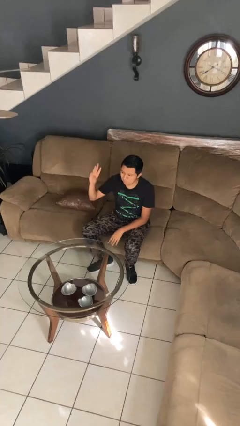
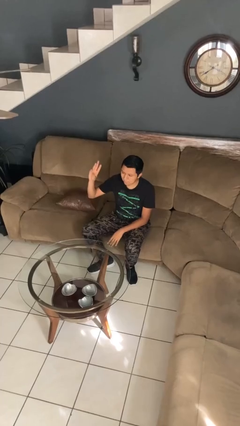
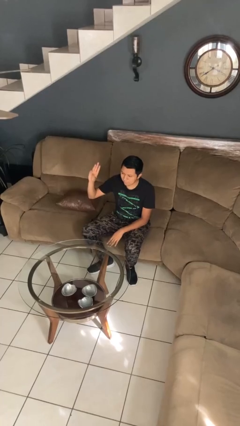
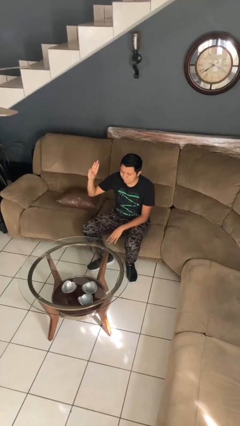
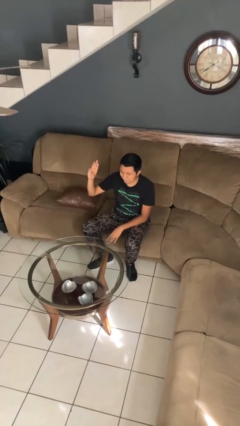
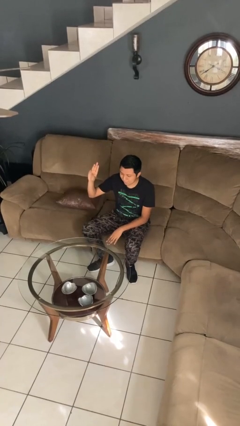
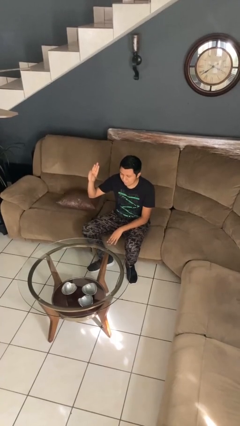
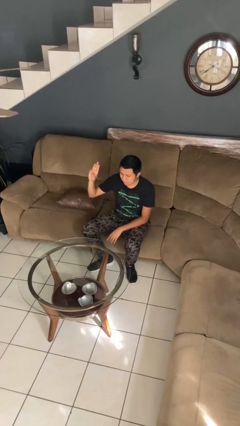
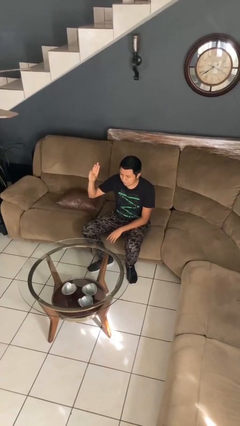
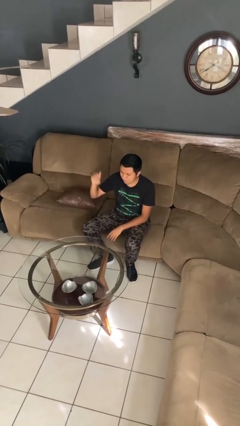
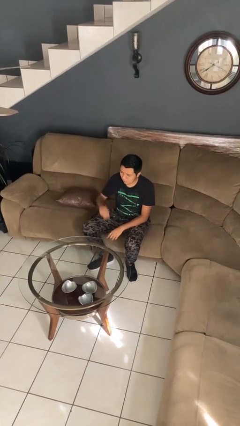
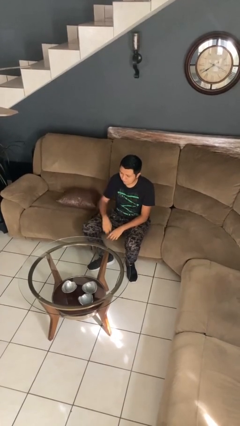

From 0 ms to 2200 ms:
person gestures number three

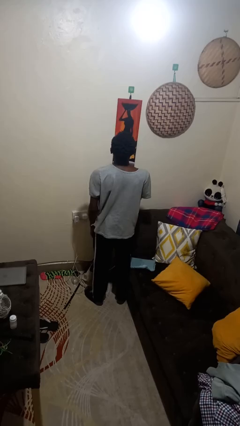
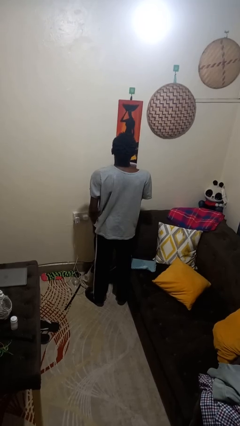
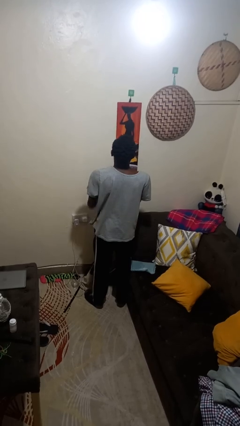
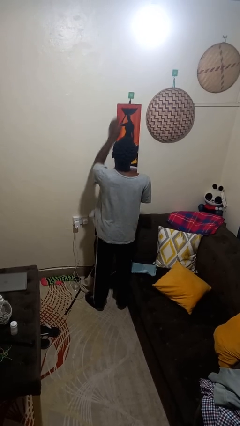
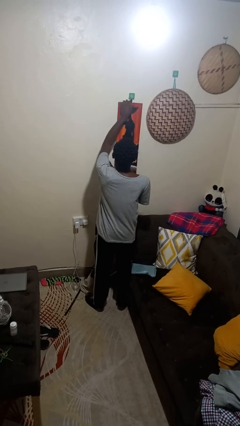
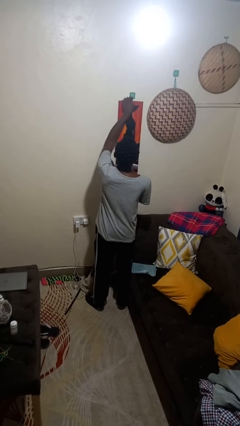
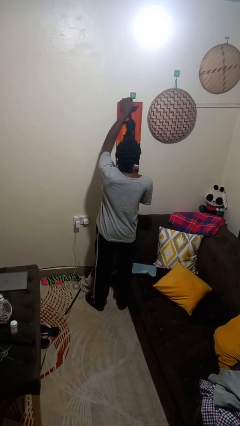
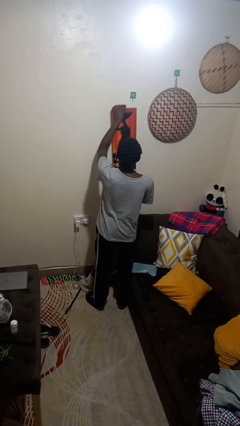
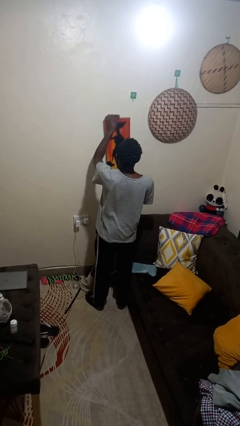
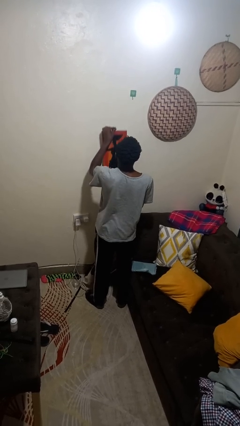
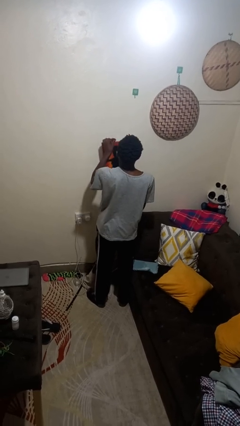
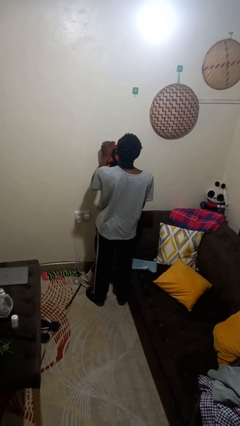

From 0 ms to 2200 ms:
person takes down picture frame

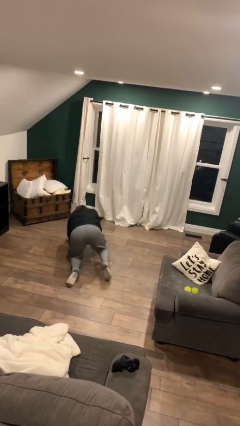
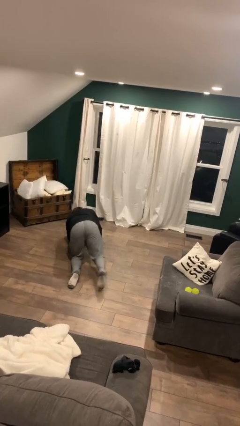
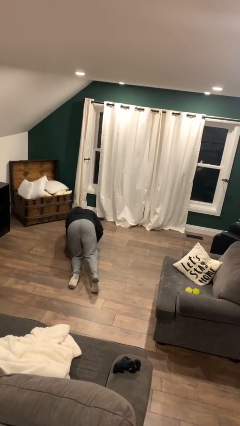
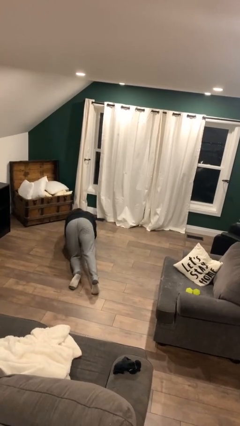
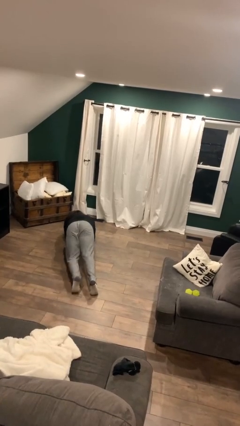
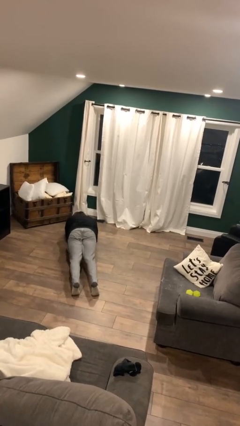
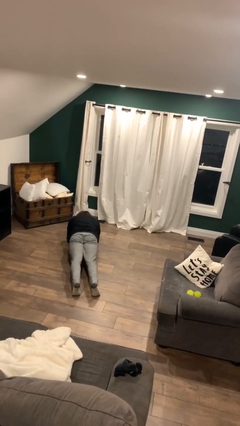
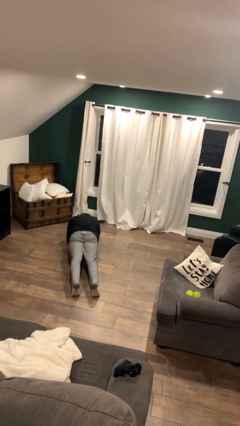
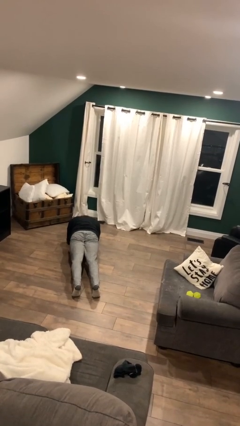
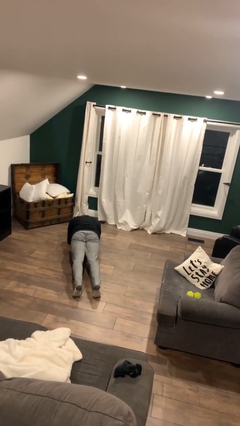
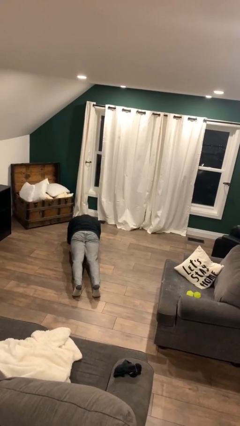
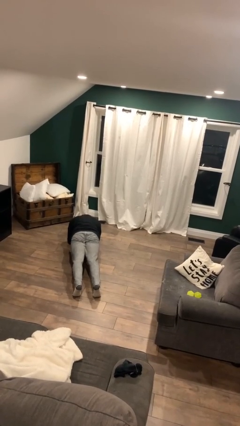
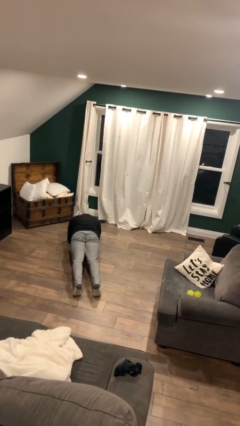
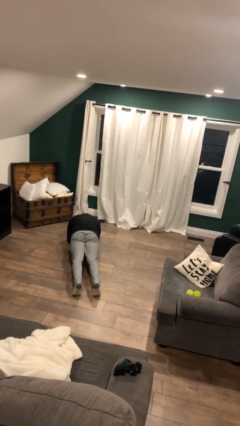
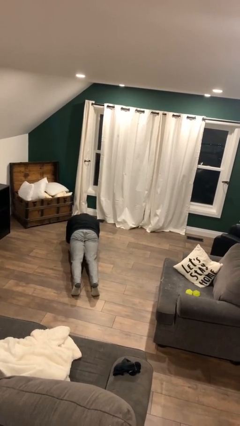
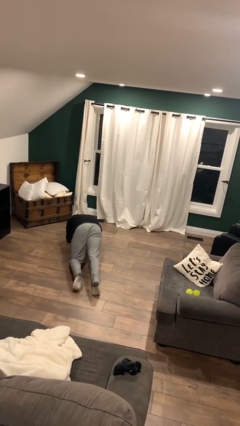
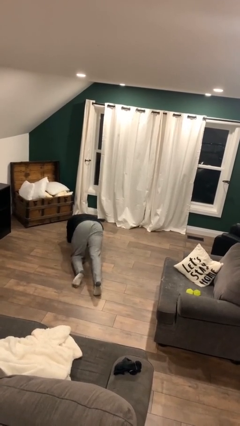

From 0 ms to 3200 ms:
person exercises with plank

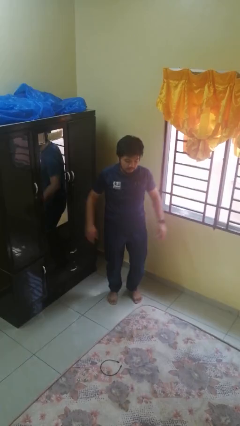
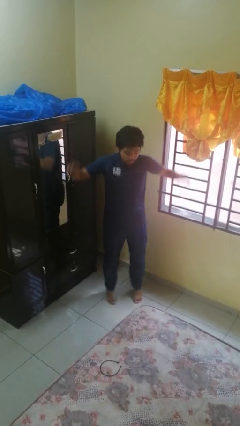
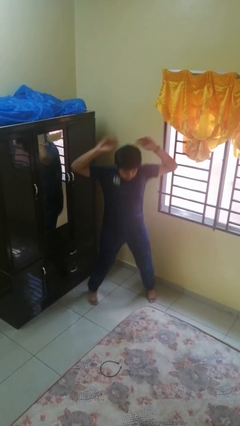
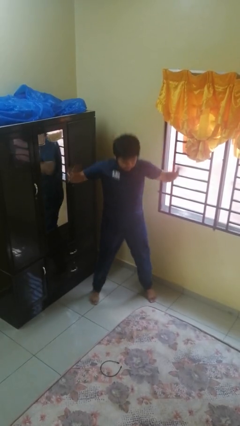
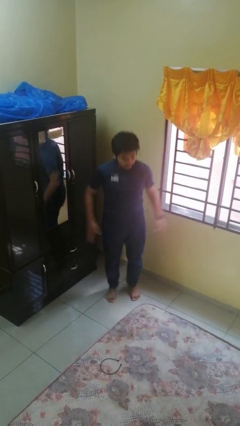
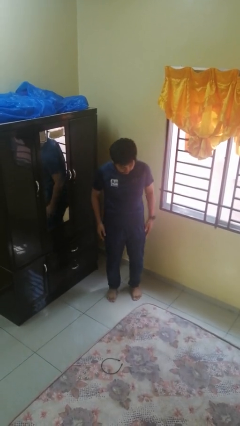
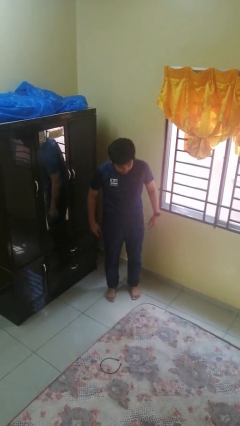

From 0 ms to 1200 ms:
person exercises with jumping jacks

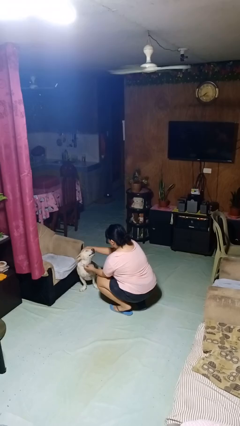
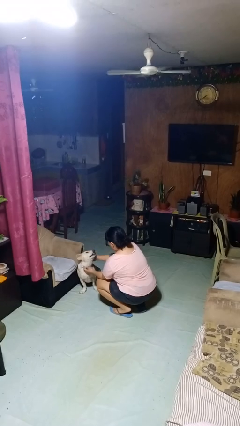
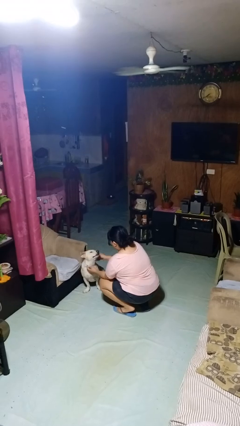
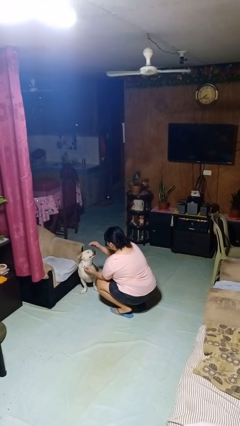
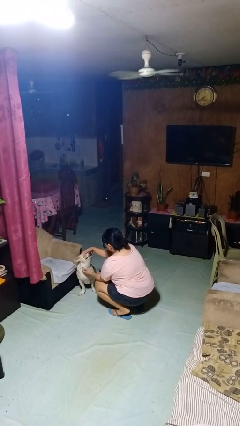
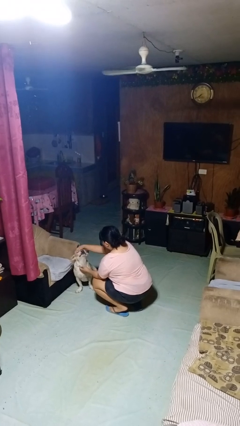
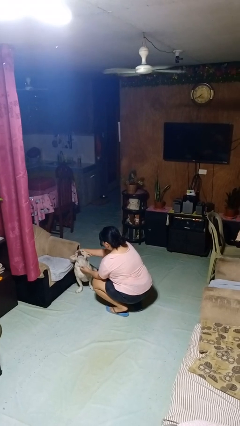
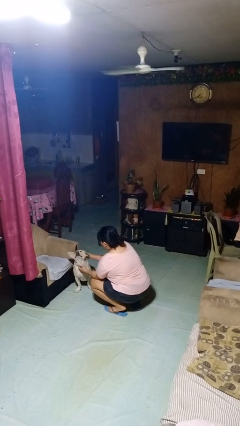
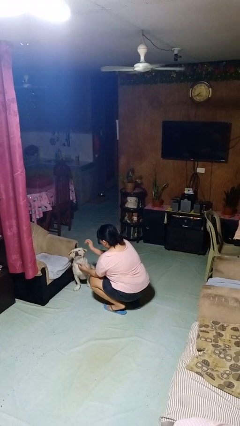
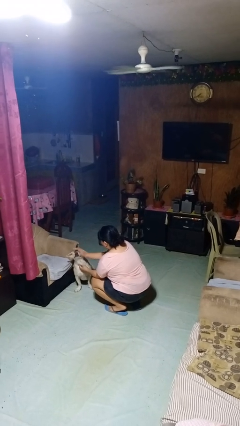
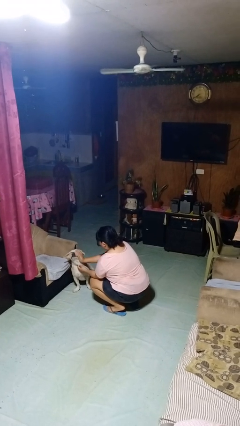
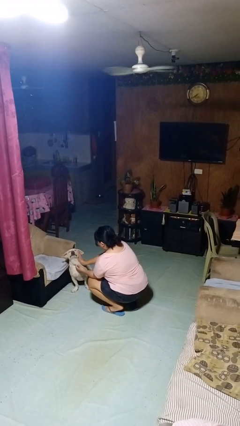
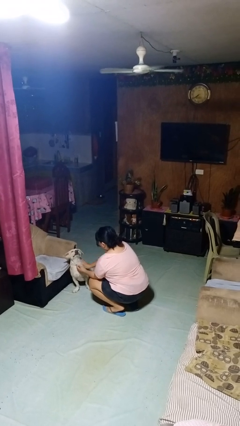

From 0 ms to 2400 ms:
person pets dog

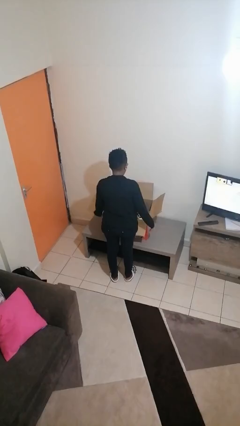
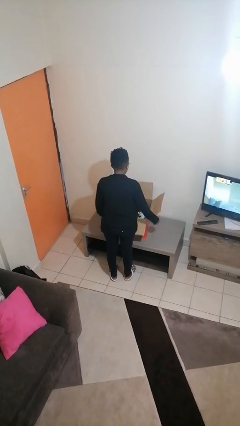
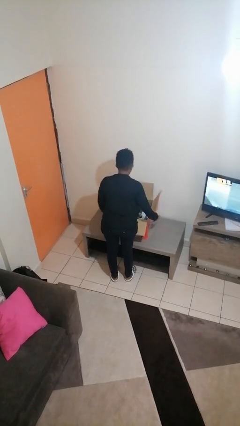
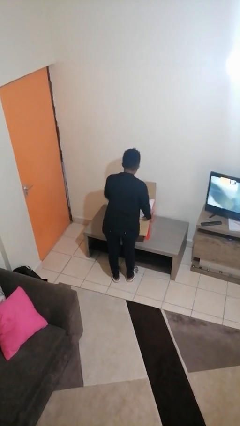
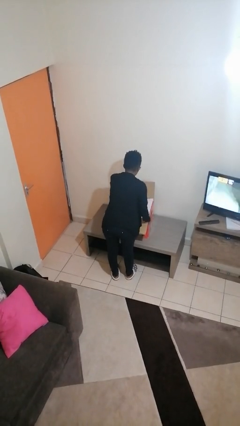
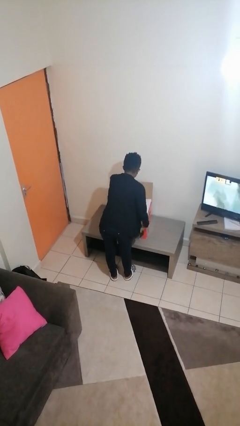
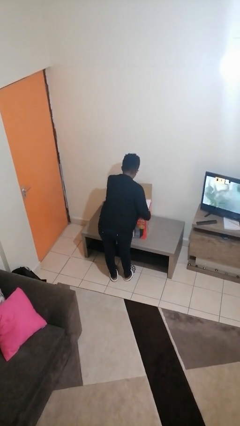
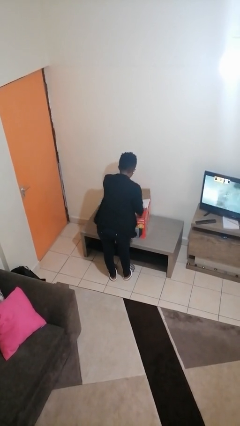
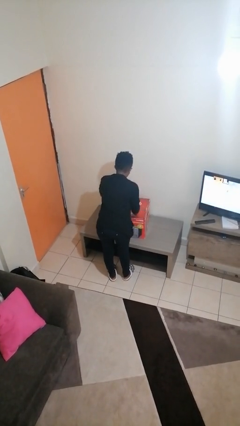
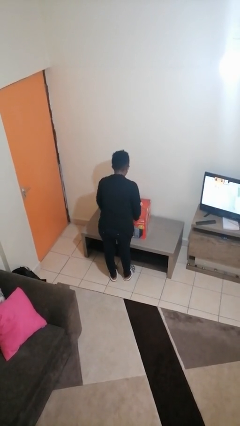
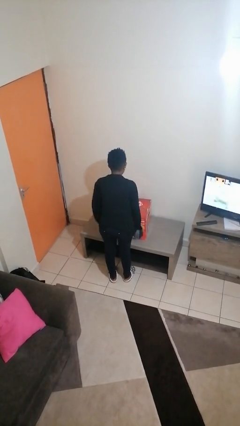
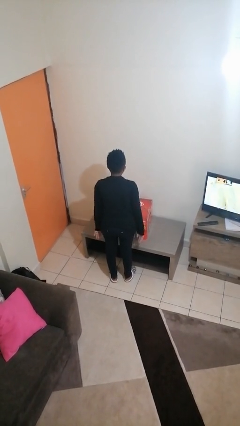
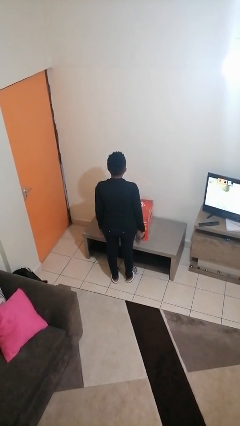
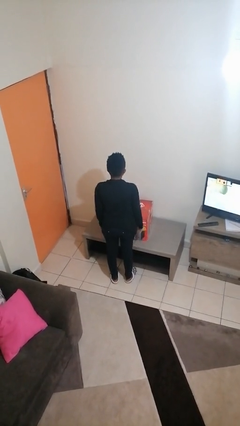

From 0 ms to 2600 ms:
person closes box

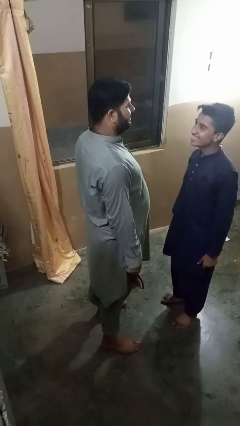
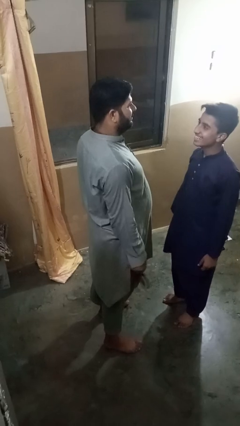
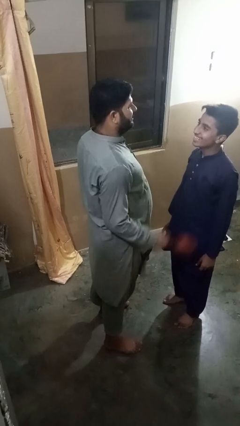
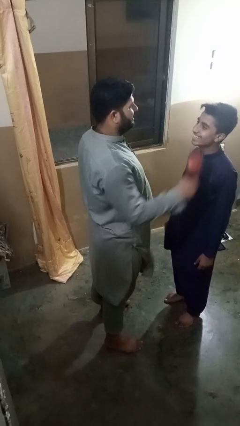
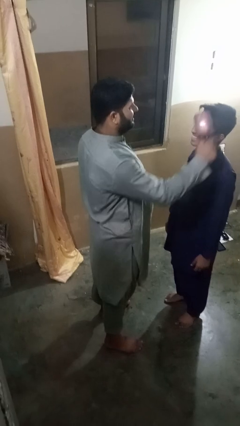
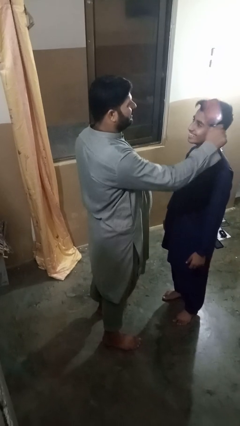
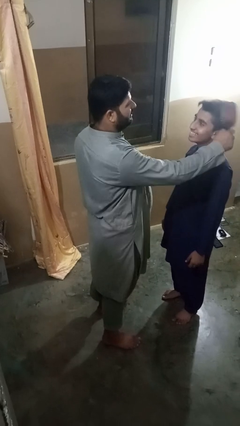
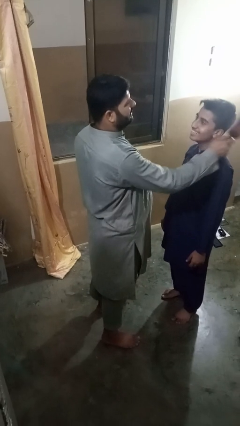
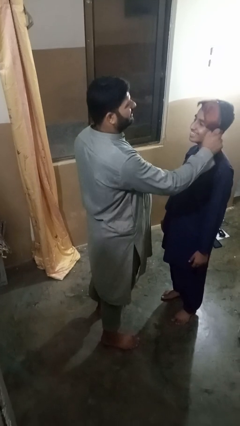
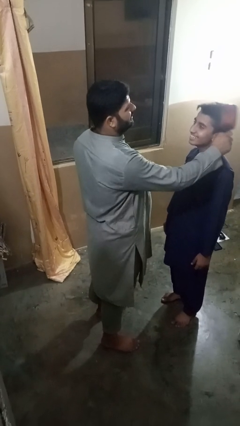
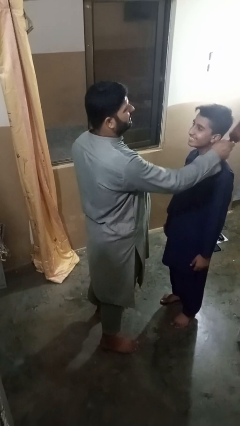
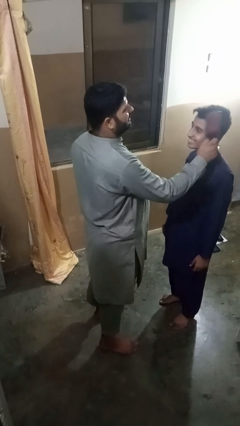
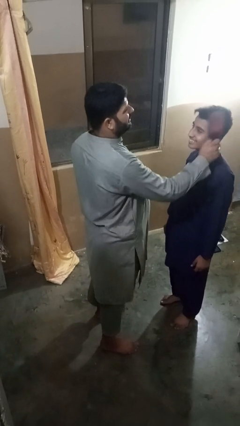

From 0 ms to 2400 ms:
person brushes hair of person

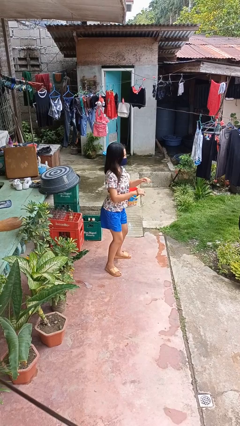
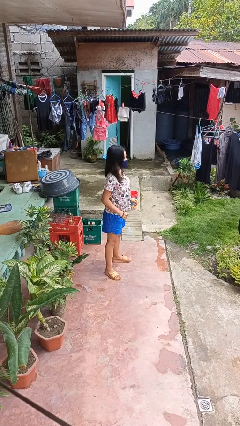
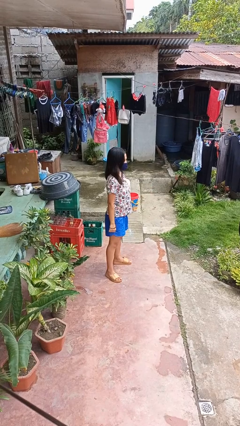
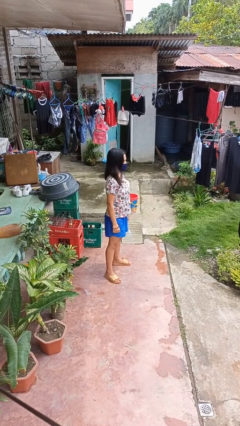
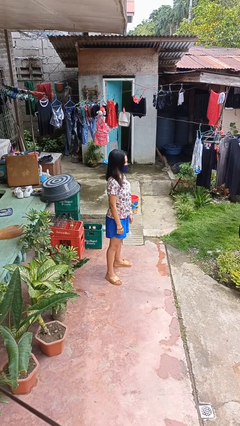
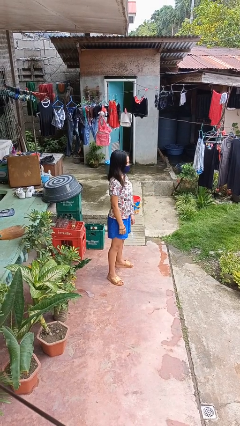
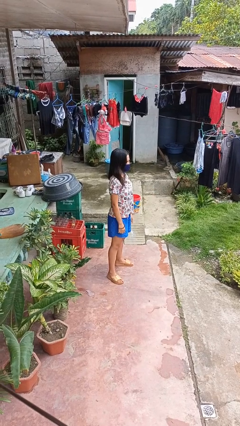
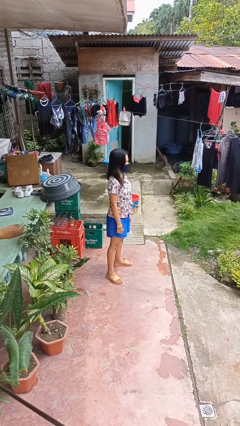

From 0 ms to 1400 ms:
person stands up
